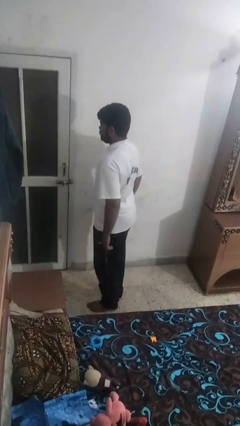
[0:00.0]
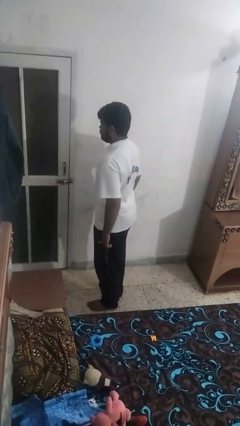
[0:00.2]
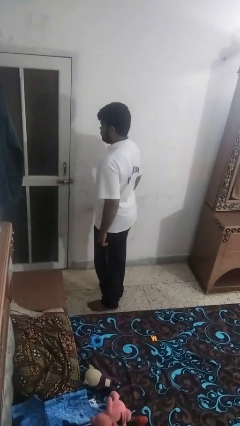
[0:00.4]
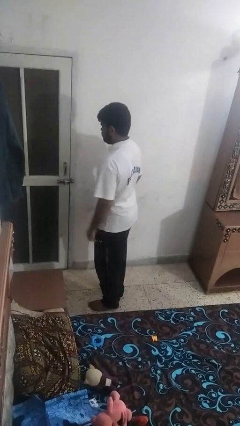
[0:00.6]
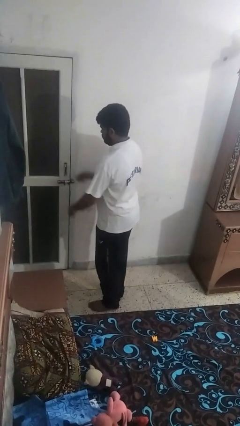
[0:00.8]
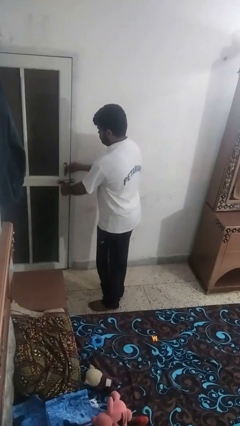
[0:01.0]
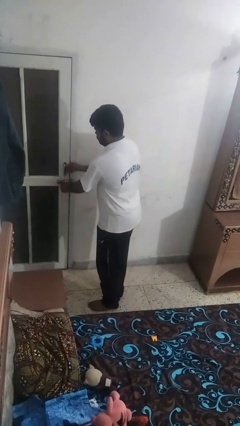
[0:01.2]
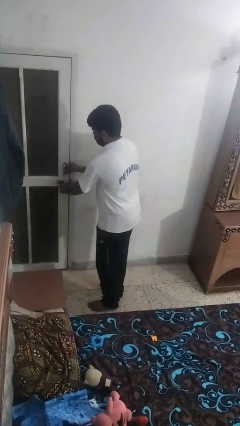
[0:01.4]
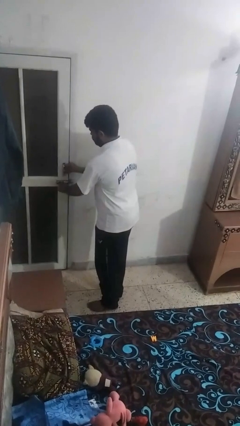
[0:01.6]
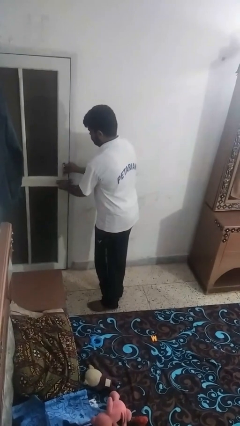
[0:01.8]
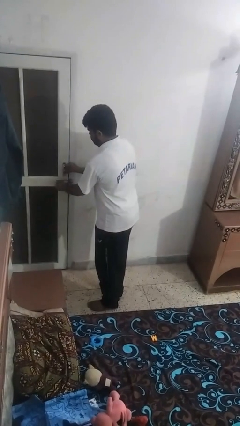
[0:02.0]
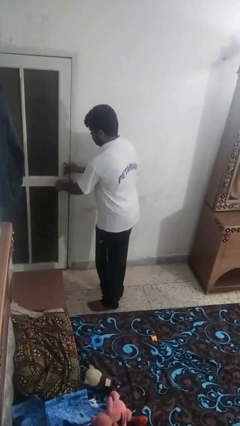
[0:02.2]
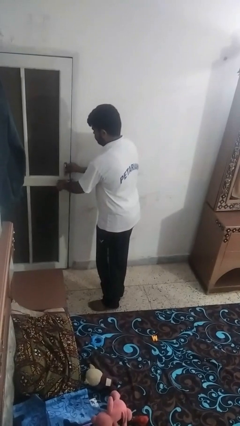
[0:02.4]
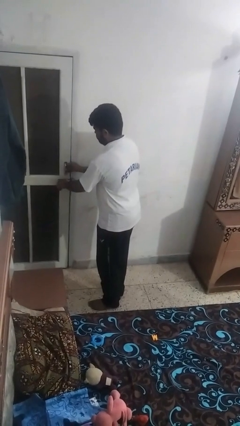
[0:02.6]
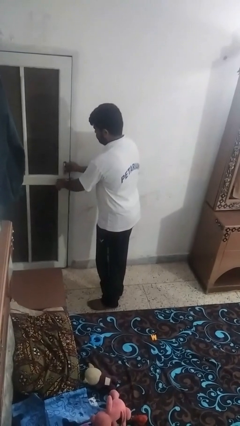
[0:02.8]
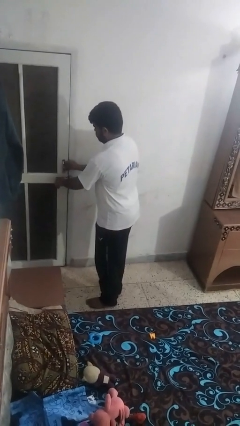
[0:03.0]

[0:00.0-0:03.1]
person unlocks door with keys

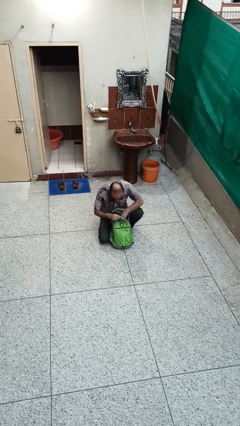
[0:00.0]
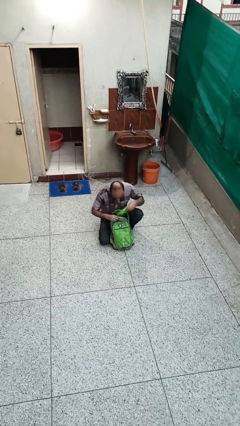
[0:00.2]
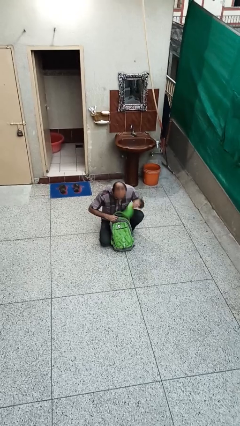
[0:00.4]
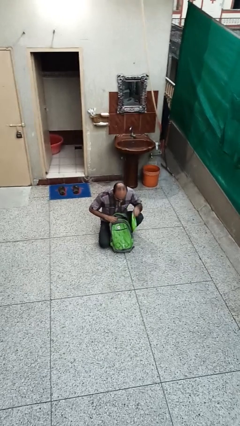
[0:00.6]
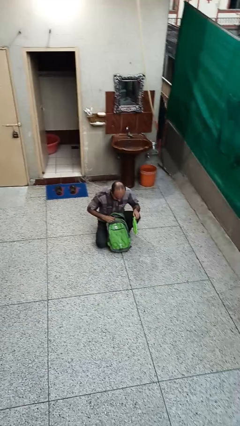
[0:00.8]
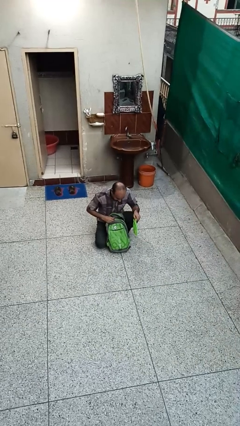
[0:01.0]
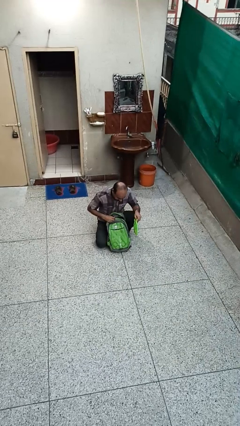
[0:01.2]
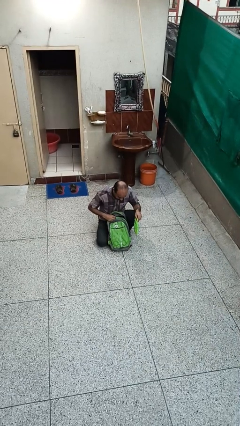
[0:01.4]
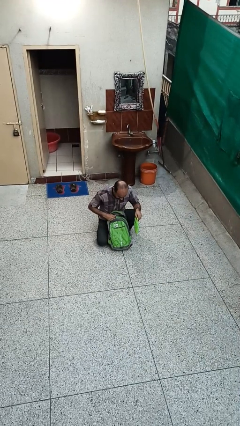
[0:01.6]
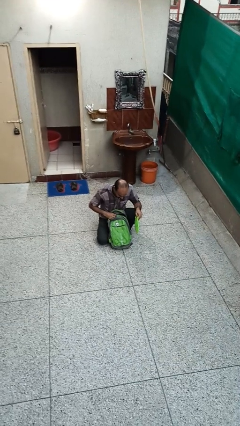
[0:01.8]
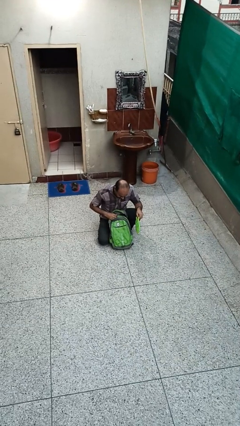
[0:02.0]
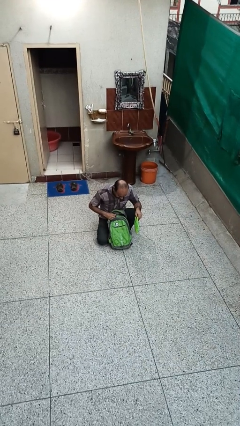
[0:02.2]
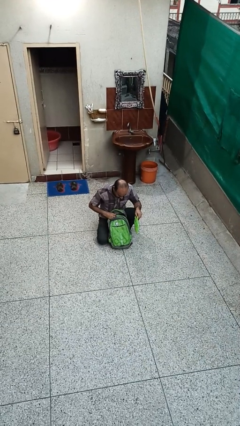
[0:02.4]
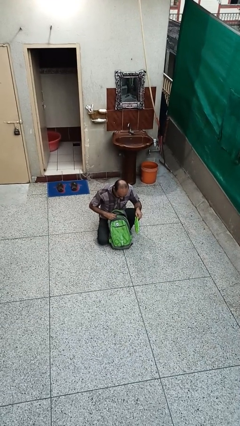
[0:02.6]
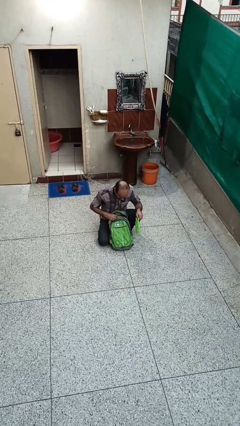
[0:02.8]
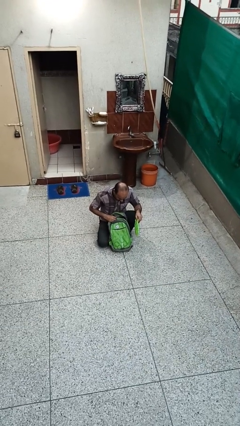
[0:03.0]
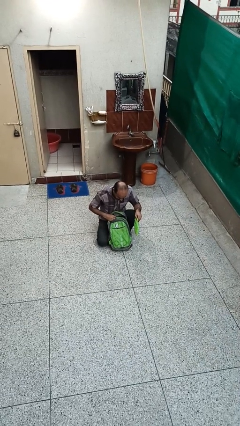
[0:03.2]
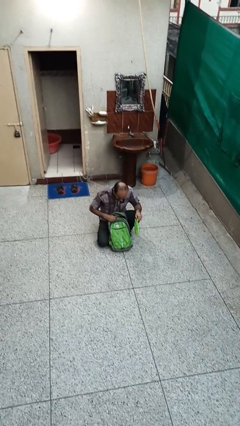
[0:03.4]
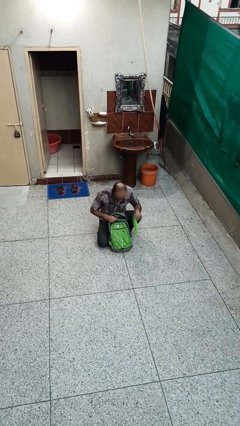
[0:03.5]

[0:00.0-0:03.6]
person takes object from backpack

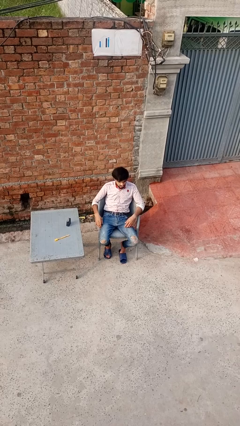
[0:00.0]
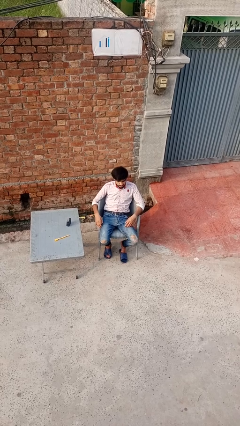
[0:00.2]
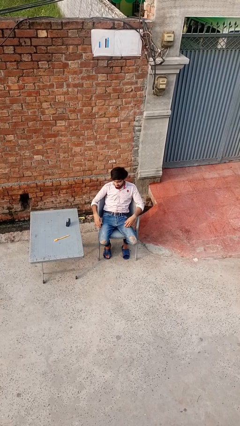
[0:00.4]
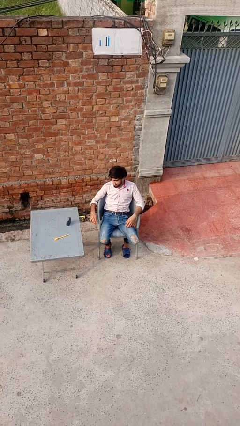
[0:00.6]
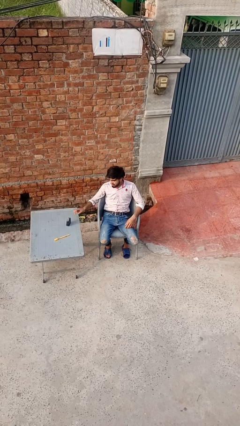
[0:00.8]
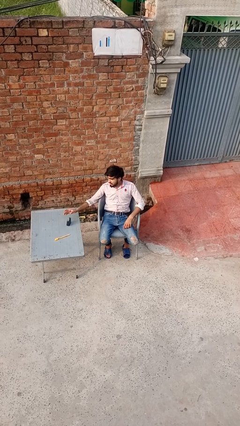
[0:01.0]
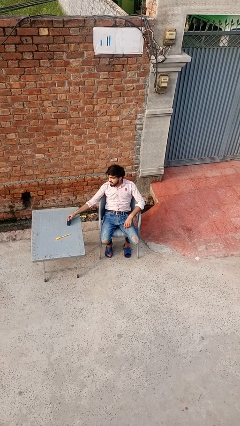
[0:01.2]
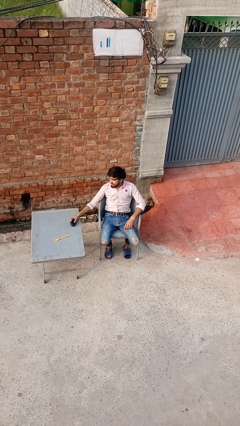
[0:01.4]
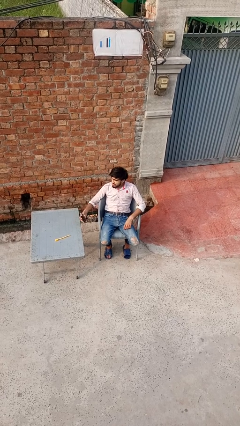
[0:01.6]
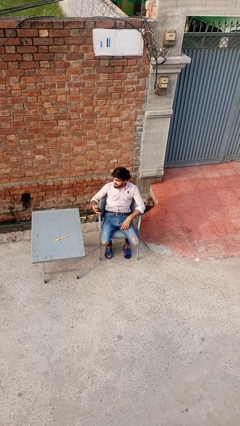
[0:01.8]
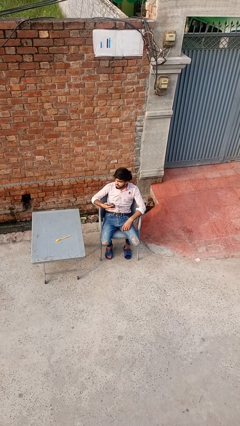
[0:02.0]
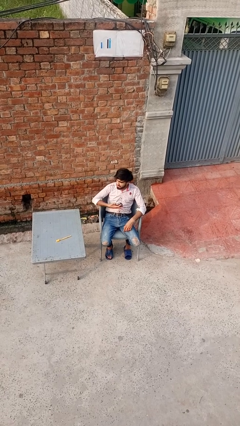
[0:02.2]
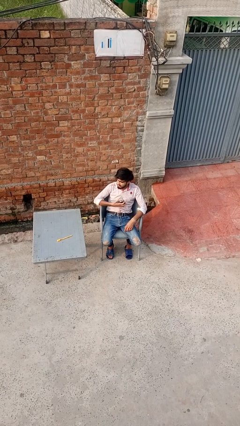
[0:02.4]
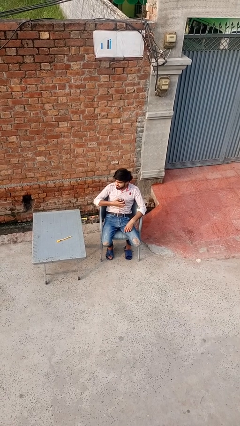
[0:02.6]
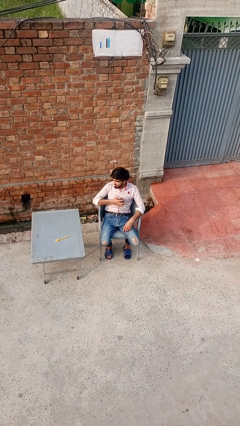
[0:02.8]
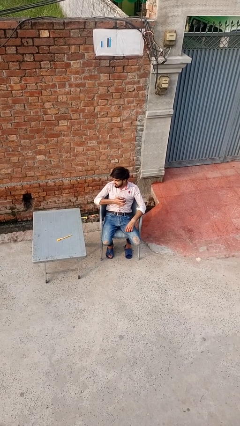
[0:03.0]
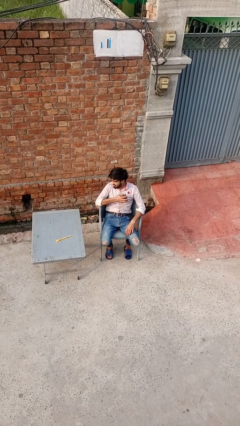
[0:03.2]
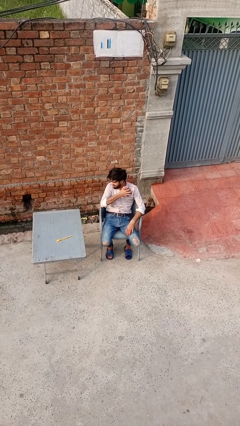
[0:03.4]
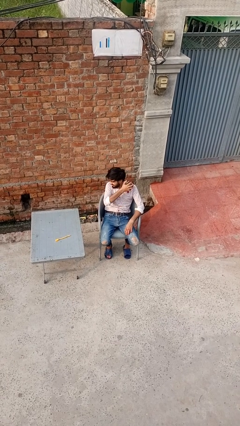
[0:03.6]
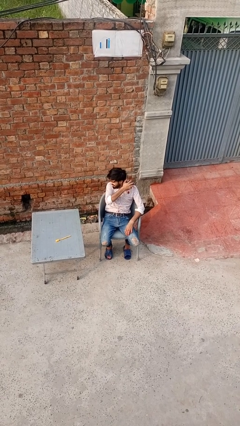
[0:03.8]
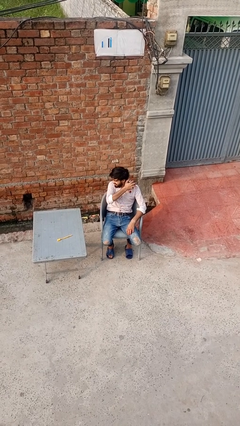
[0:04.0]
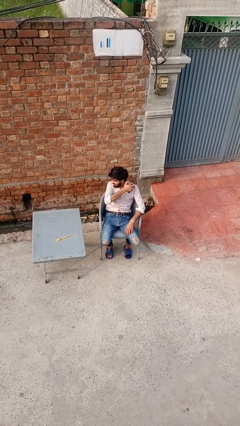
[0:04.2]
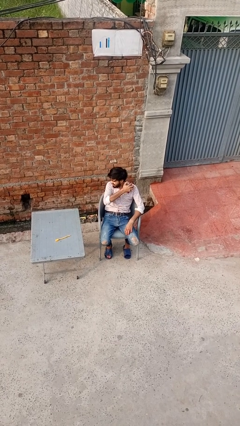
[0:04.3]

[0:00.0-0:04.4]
person applies deodorant

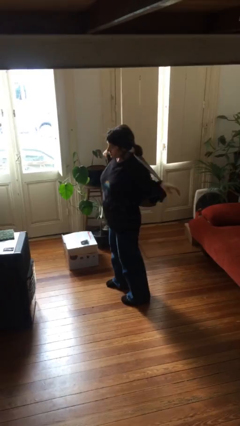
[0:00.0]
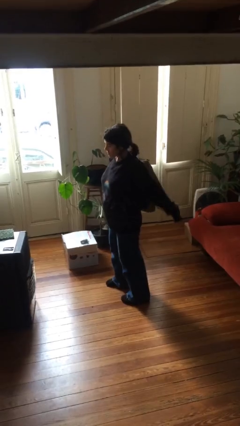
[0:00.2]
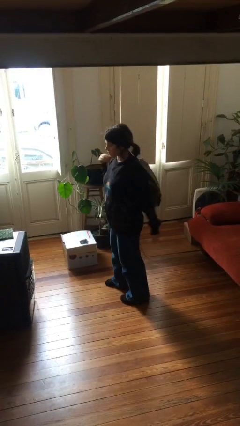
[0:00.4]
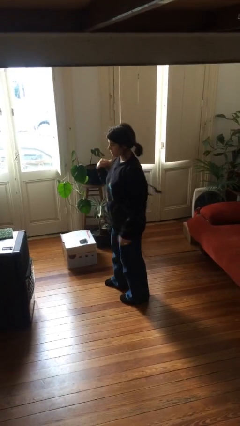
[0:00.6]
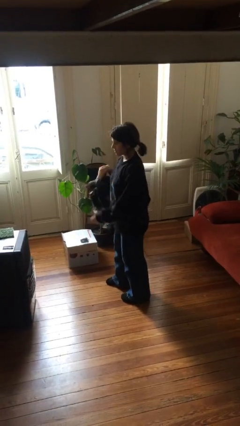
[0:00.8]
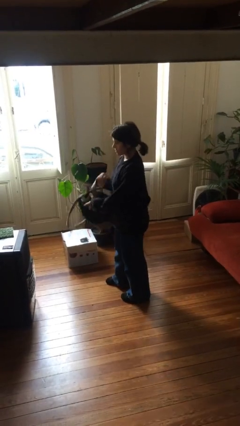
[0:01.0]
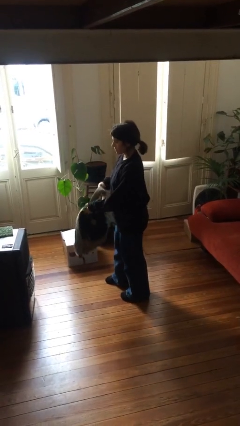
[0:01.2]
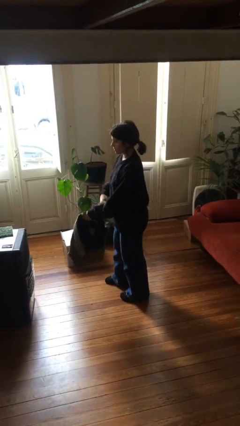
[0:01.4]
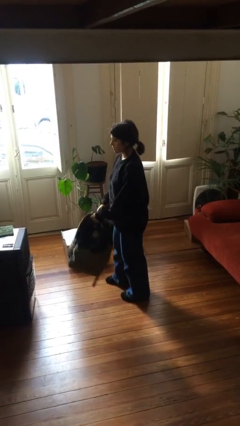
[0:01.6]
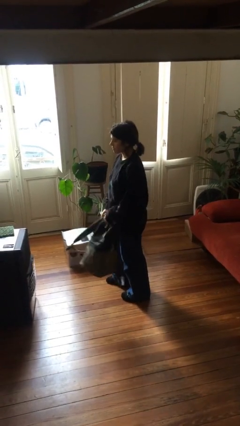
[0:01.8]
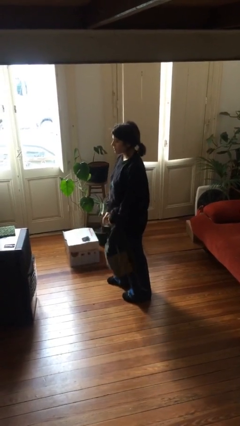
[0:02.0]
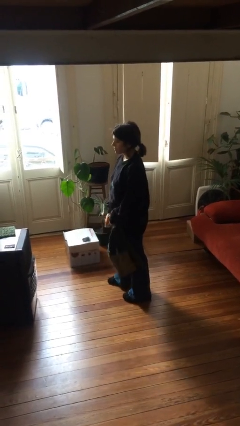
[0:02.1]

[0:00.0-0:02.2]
person takes off backpack

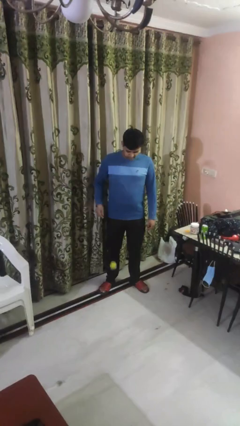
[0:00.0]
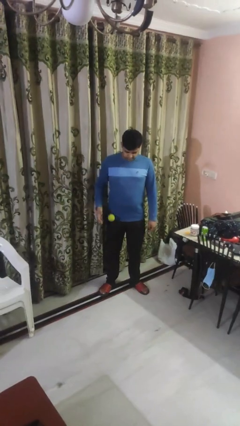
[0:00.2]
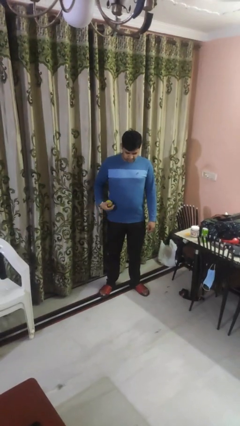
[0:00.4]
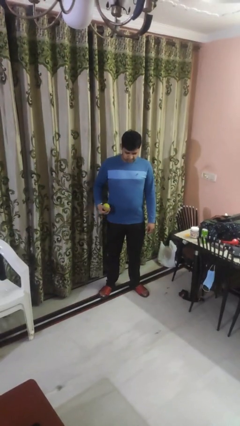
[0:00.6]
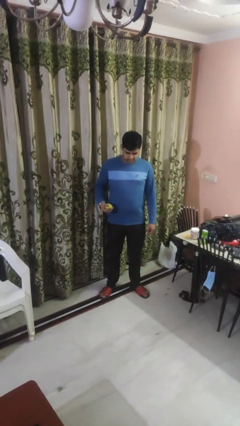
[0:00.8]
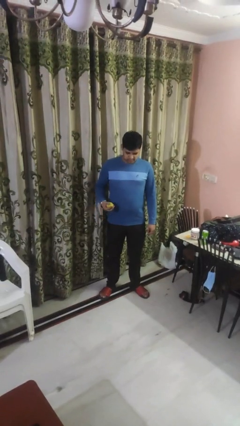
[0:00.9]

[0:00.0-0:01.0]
person bounces ball on floor

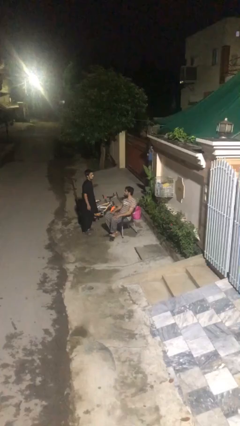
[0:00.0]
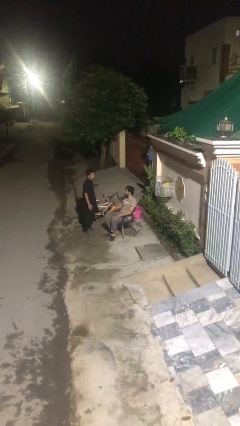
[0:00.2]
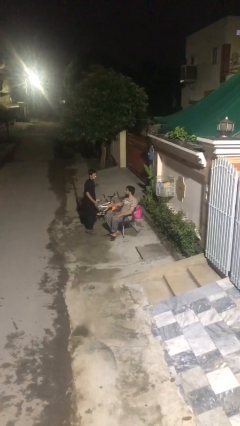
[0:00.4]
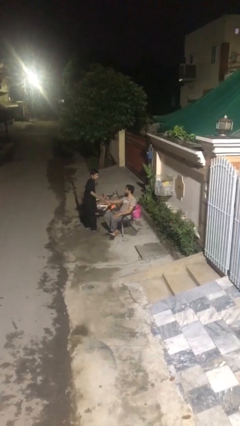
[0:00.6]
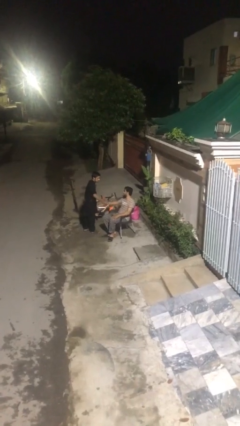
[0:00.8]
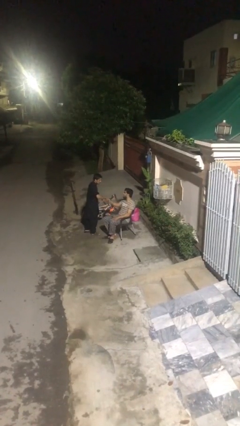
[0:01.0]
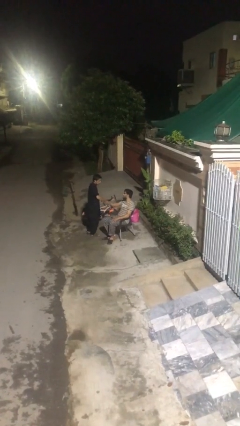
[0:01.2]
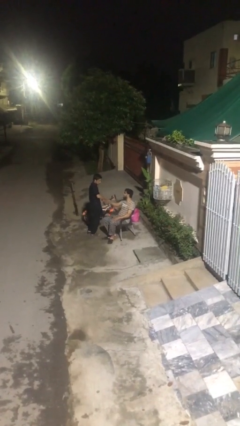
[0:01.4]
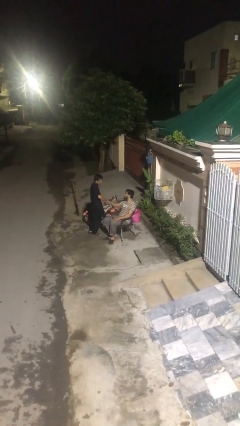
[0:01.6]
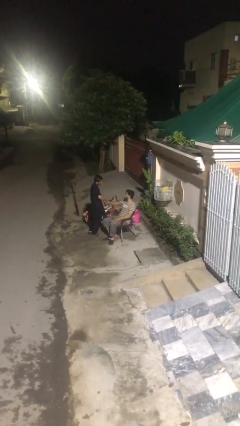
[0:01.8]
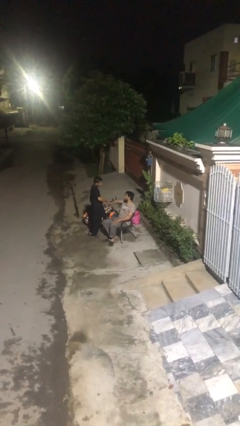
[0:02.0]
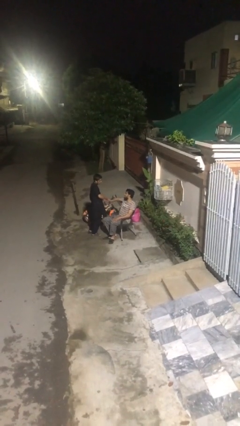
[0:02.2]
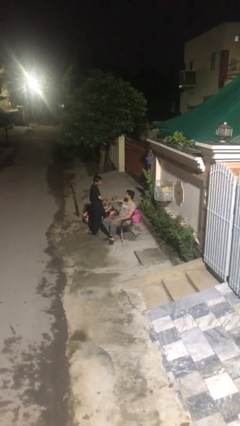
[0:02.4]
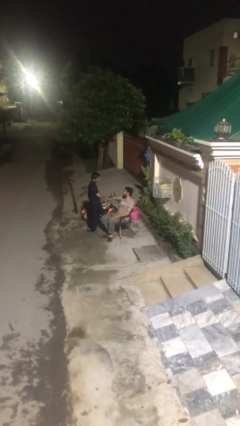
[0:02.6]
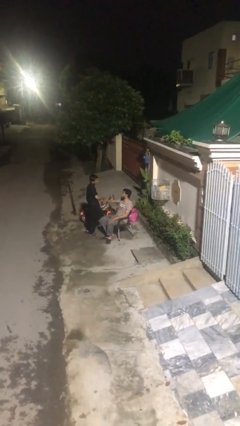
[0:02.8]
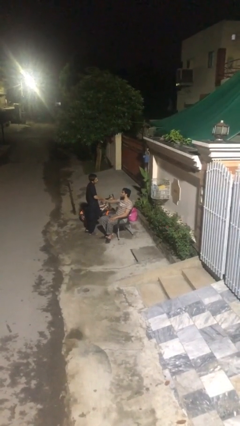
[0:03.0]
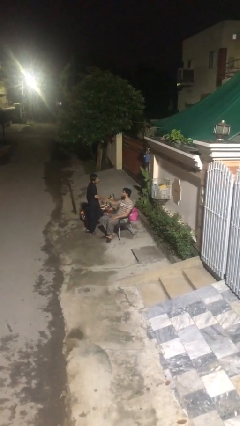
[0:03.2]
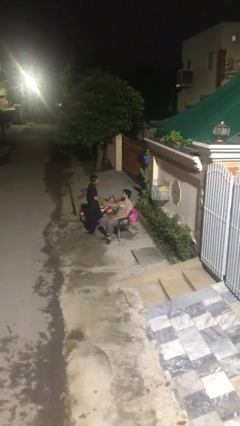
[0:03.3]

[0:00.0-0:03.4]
person shakes hand
